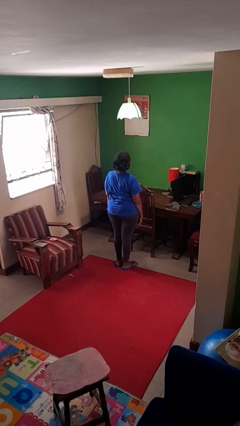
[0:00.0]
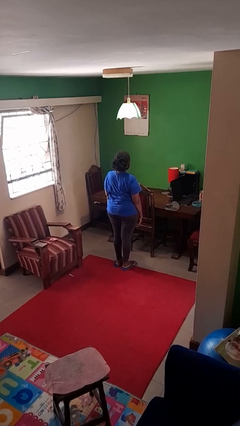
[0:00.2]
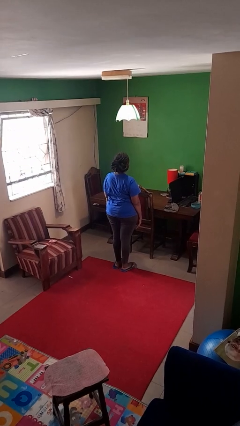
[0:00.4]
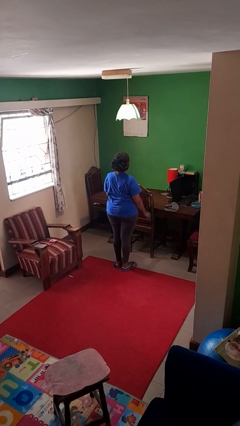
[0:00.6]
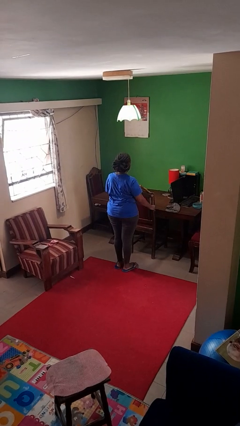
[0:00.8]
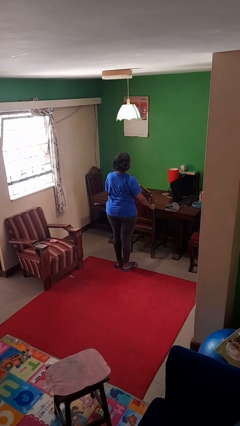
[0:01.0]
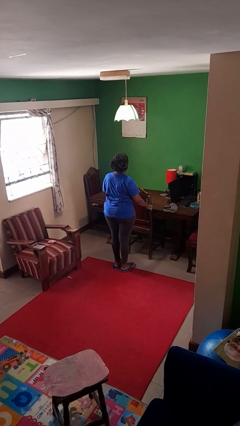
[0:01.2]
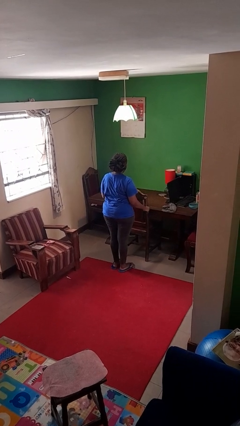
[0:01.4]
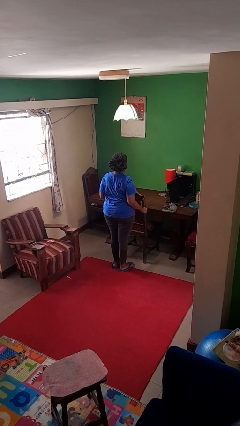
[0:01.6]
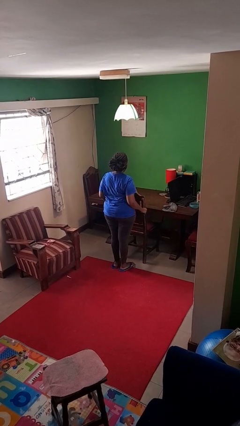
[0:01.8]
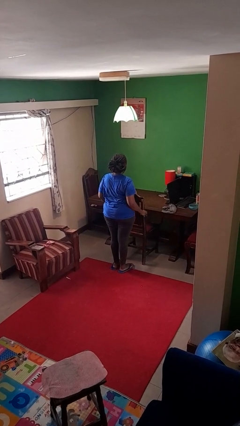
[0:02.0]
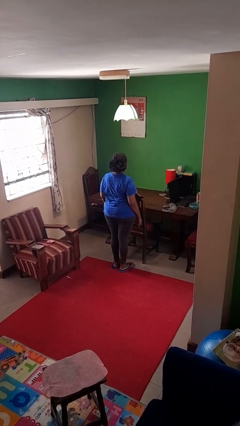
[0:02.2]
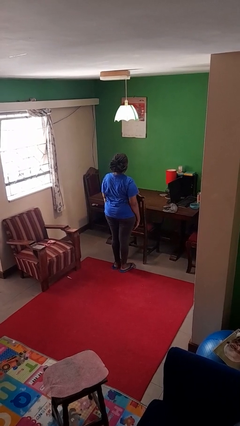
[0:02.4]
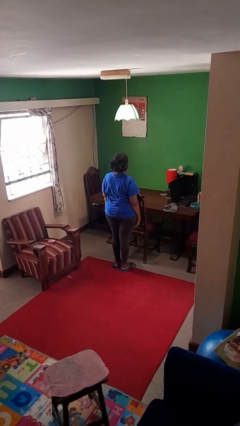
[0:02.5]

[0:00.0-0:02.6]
person pulls out chair

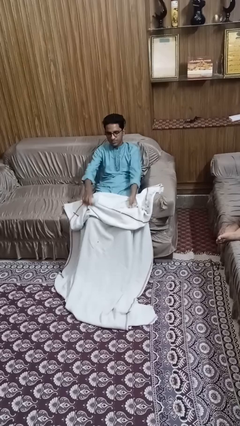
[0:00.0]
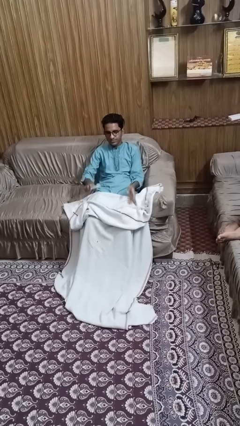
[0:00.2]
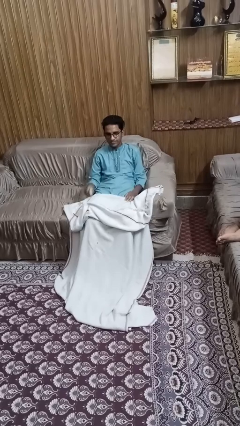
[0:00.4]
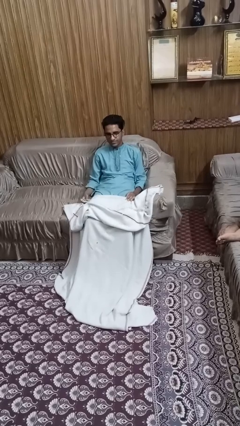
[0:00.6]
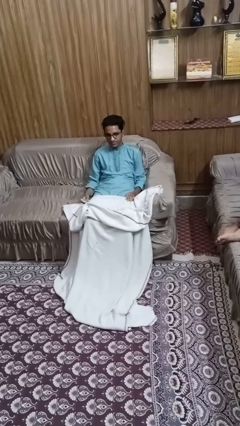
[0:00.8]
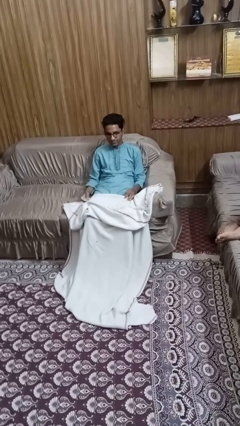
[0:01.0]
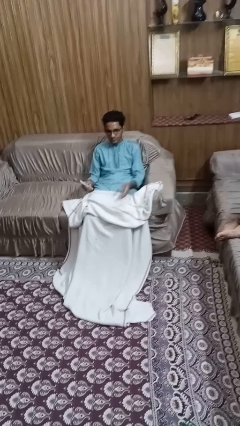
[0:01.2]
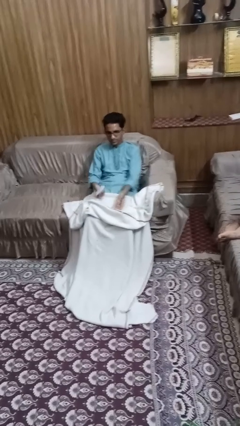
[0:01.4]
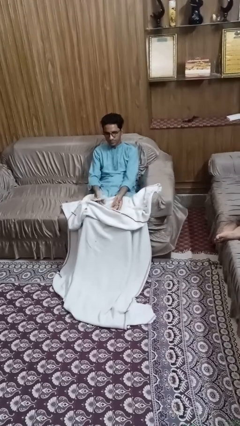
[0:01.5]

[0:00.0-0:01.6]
person uncovers with blanket

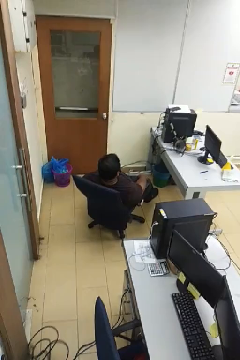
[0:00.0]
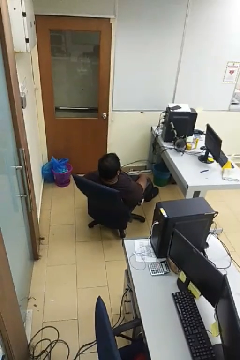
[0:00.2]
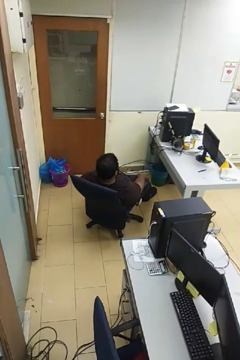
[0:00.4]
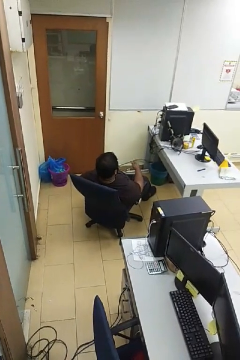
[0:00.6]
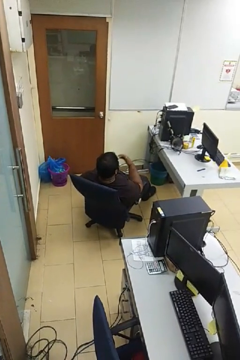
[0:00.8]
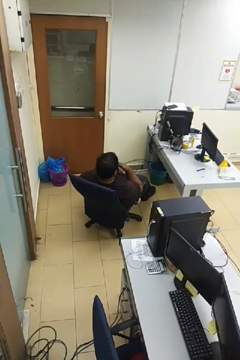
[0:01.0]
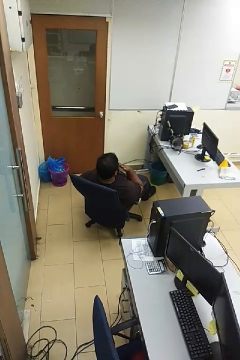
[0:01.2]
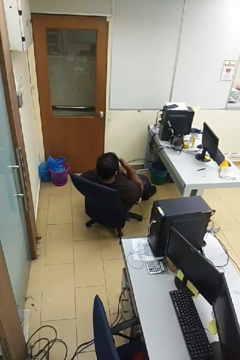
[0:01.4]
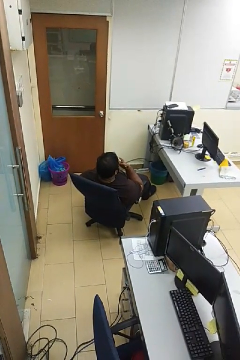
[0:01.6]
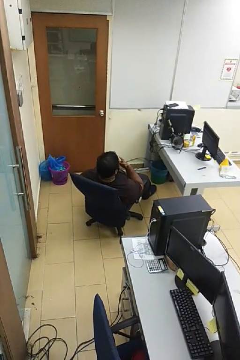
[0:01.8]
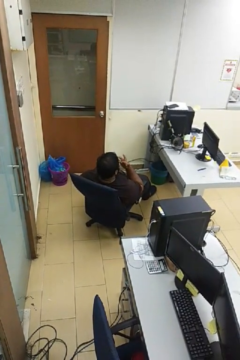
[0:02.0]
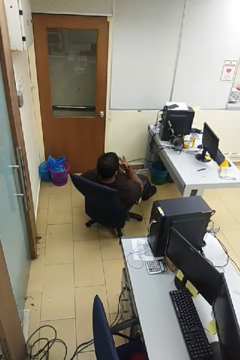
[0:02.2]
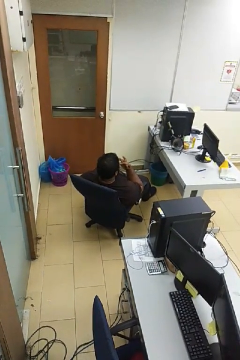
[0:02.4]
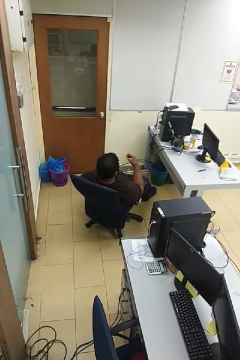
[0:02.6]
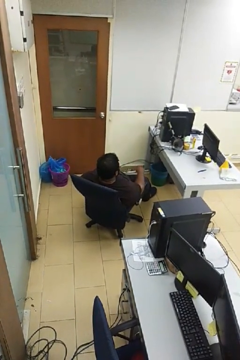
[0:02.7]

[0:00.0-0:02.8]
person licks fingers

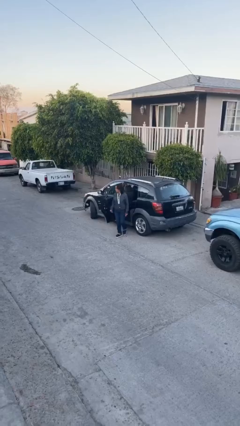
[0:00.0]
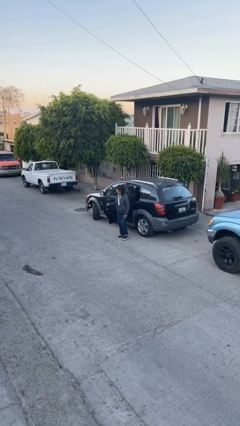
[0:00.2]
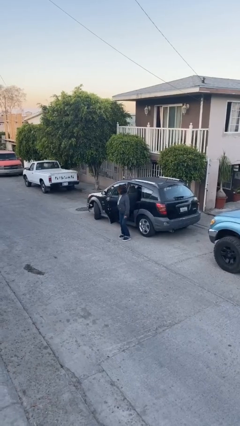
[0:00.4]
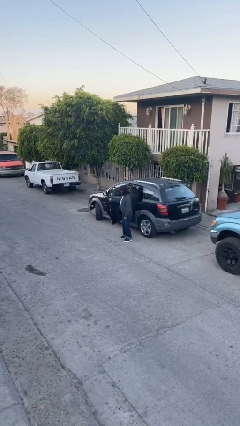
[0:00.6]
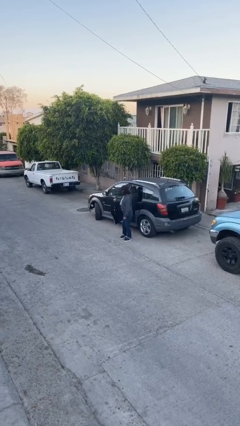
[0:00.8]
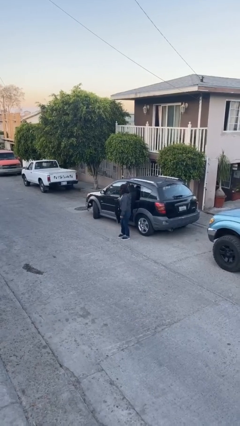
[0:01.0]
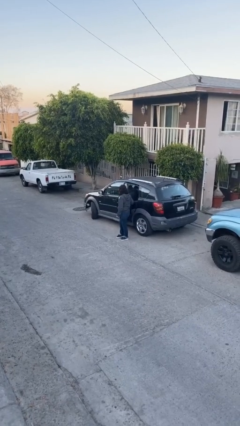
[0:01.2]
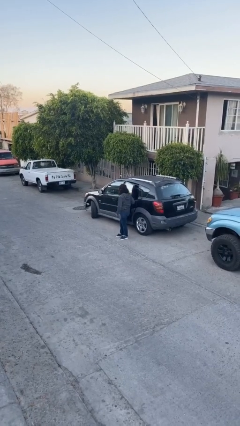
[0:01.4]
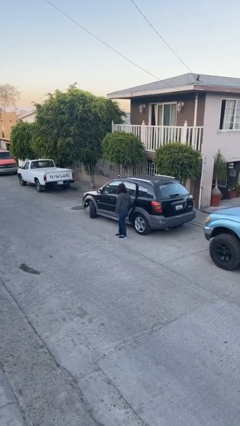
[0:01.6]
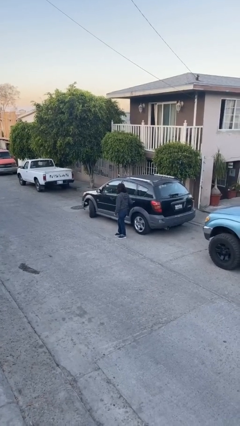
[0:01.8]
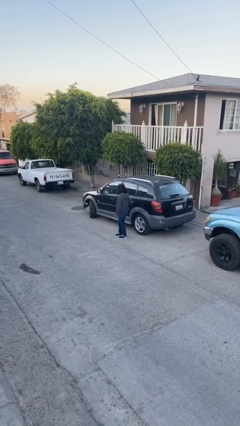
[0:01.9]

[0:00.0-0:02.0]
person closes car door

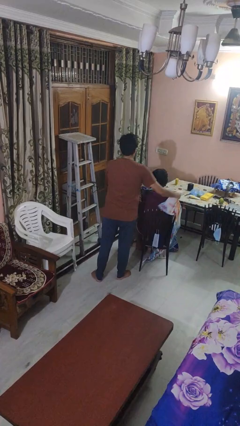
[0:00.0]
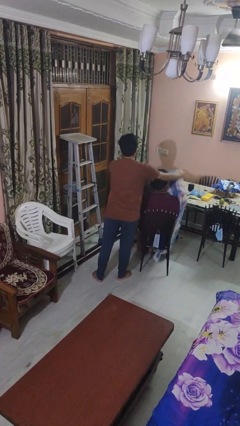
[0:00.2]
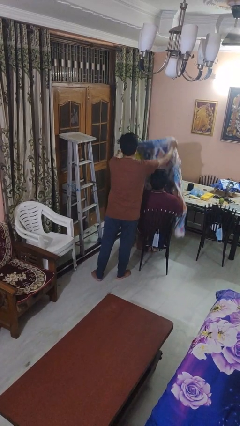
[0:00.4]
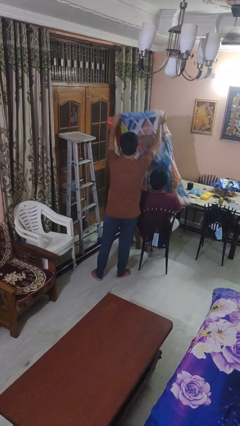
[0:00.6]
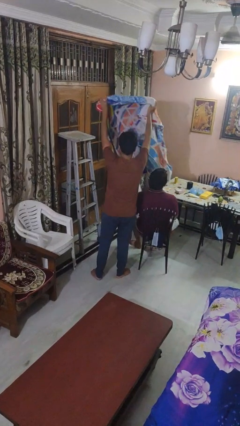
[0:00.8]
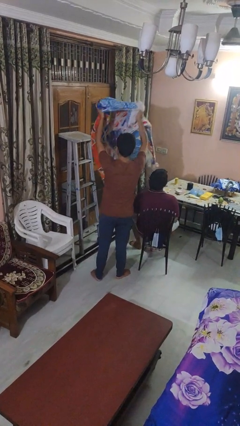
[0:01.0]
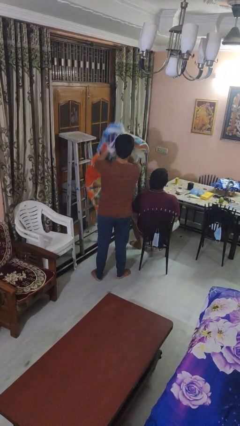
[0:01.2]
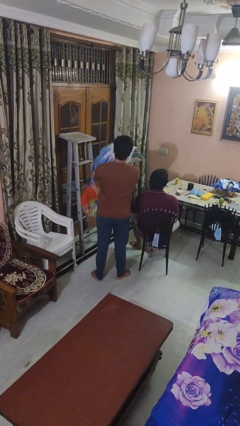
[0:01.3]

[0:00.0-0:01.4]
person uncovers friend with blanket

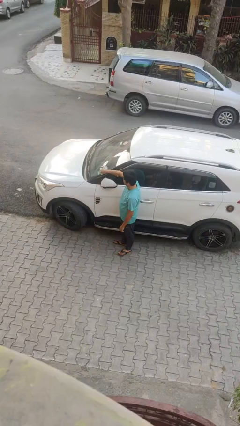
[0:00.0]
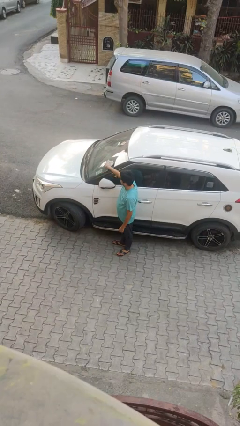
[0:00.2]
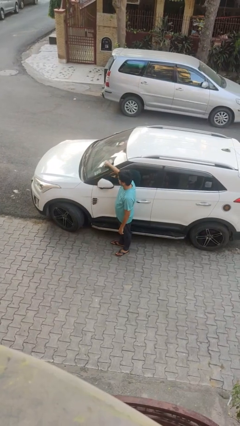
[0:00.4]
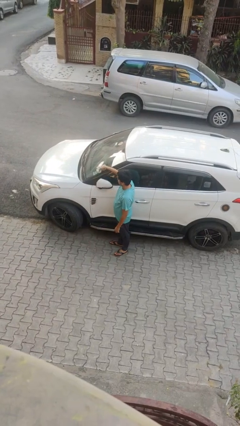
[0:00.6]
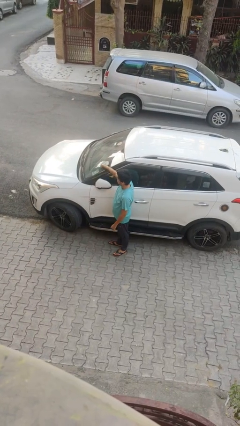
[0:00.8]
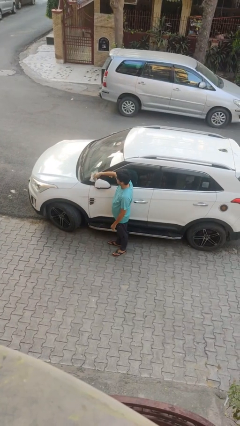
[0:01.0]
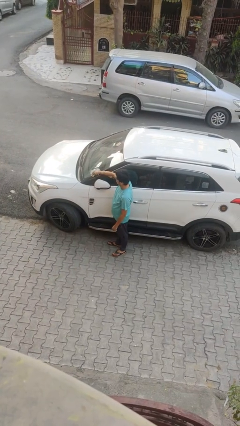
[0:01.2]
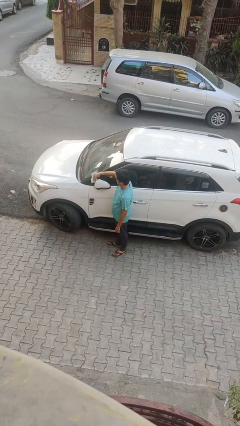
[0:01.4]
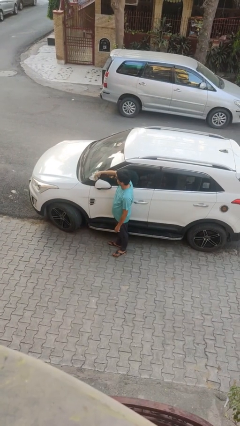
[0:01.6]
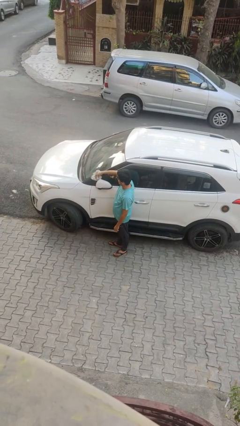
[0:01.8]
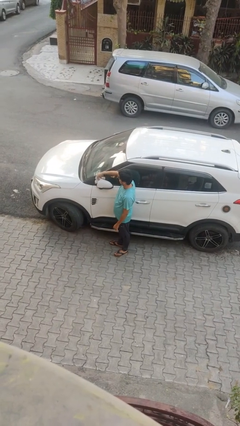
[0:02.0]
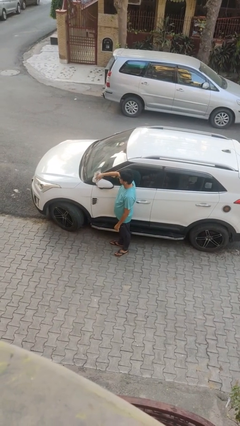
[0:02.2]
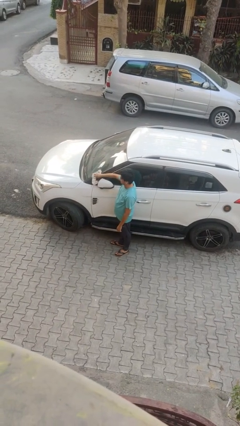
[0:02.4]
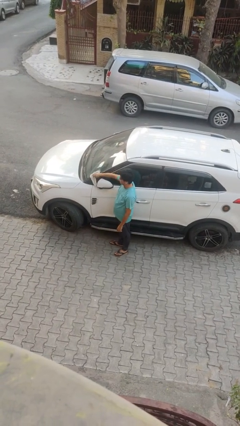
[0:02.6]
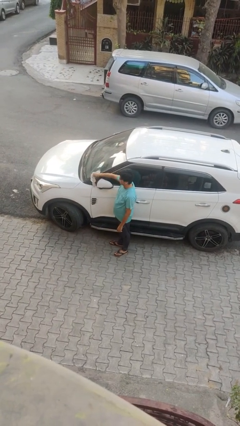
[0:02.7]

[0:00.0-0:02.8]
person polishes car with rag

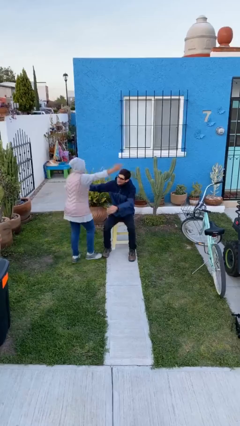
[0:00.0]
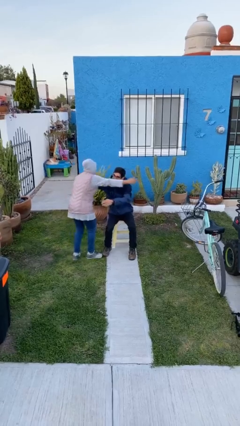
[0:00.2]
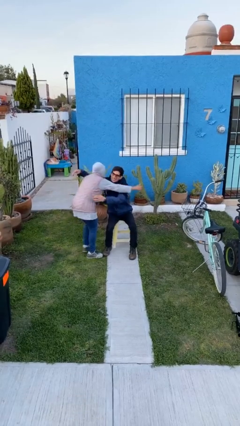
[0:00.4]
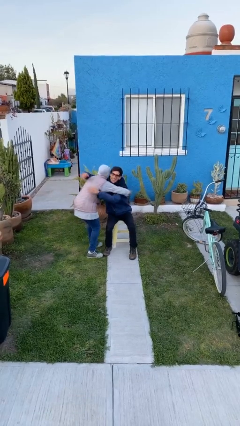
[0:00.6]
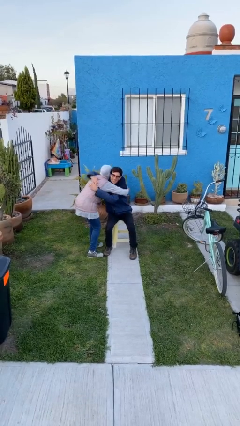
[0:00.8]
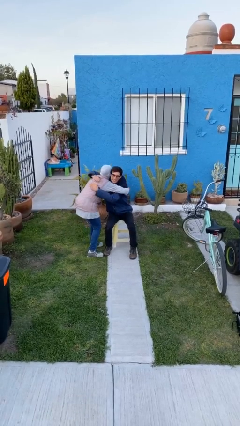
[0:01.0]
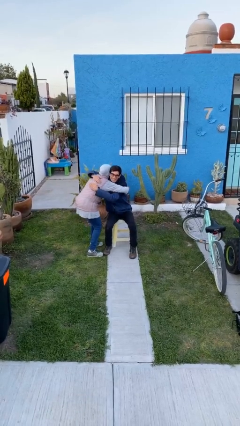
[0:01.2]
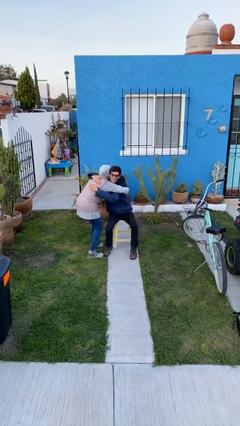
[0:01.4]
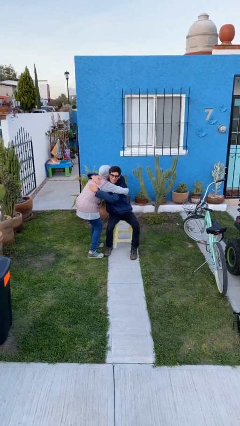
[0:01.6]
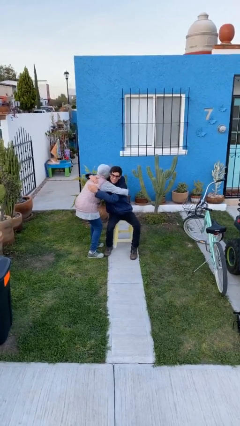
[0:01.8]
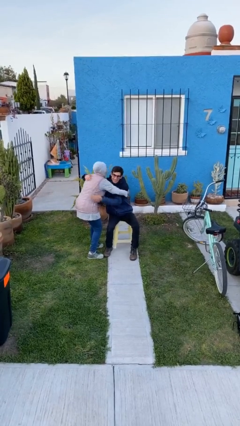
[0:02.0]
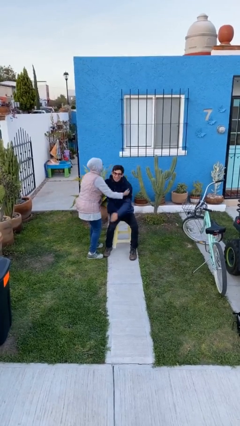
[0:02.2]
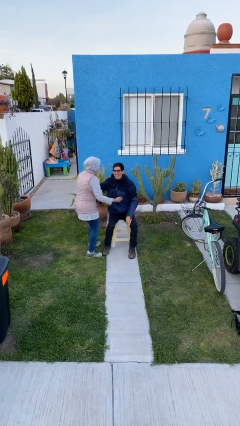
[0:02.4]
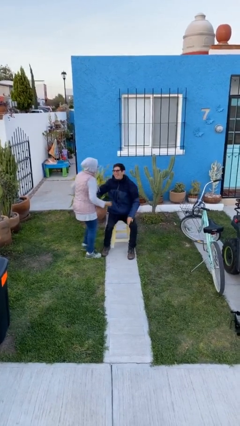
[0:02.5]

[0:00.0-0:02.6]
person embraces person

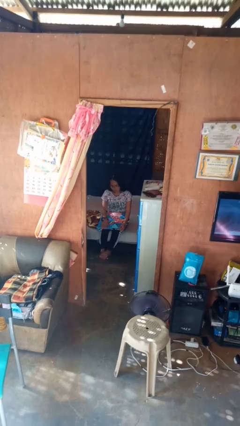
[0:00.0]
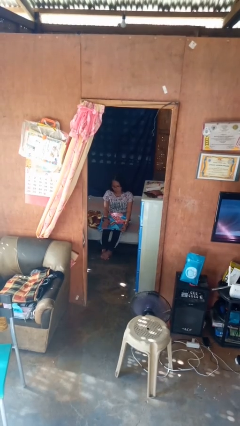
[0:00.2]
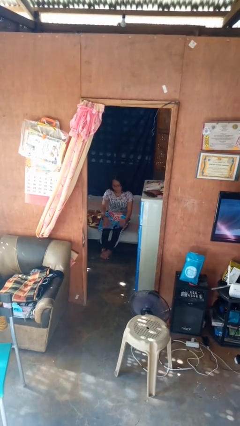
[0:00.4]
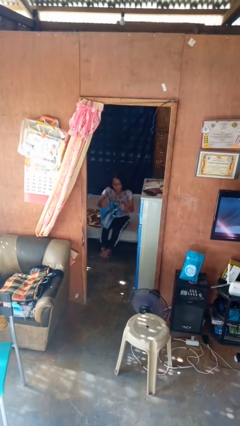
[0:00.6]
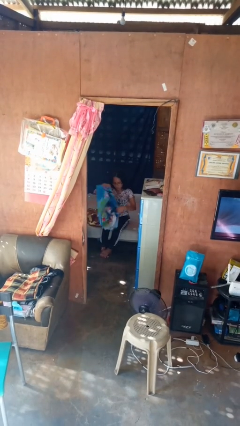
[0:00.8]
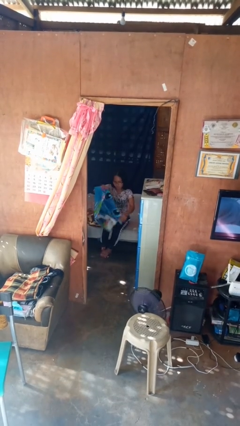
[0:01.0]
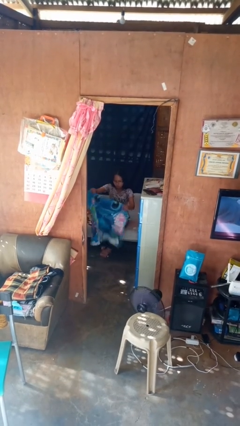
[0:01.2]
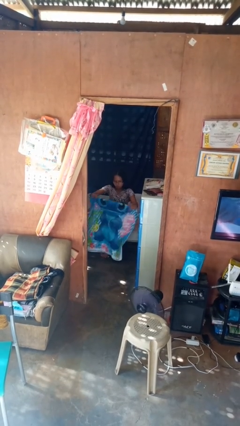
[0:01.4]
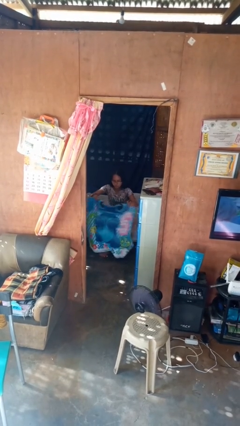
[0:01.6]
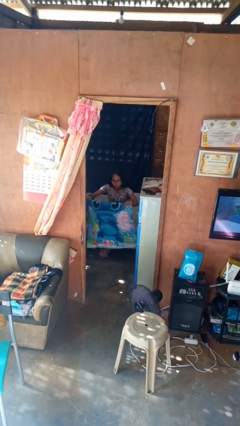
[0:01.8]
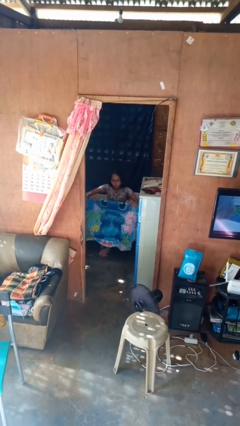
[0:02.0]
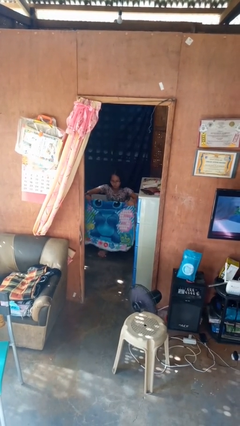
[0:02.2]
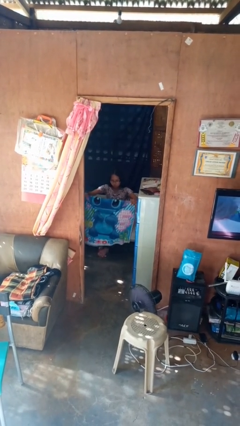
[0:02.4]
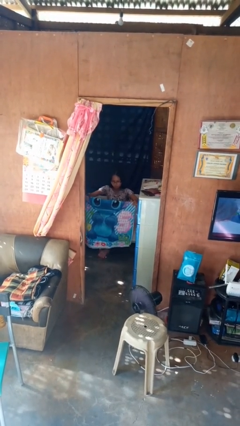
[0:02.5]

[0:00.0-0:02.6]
person unfolds blanket
